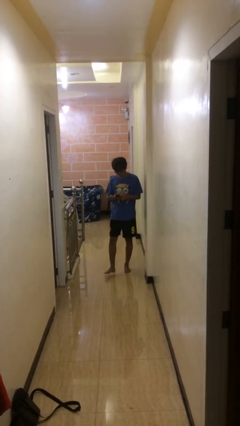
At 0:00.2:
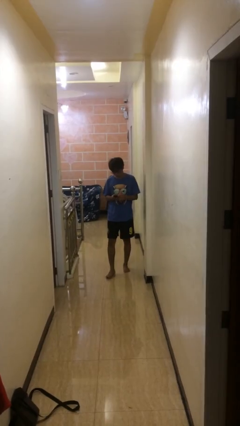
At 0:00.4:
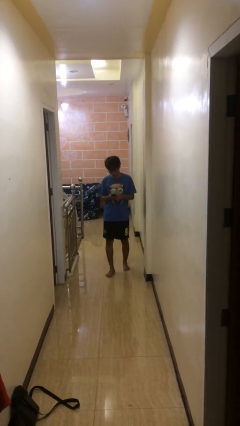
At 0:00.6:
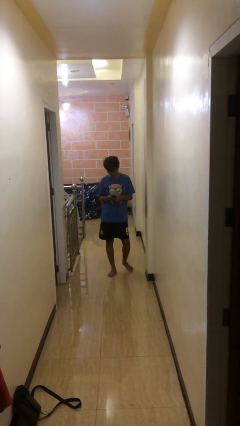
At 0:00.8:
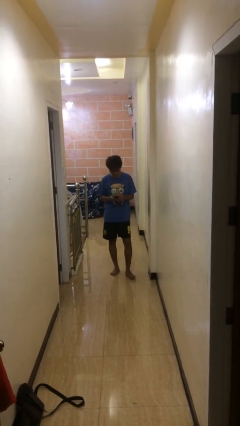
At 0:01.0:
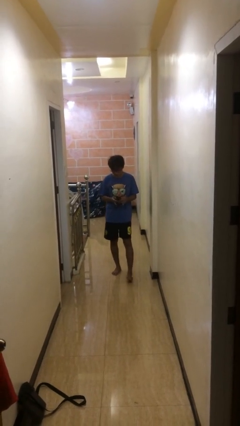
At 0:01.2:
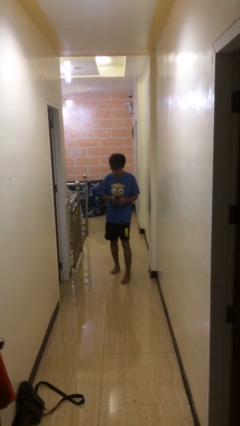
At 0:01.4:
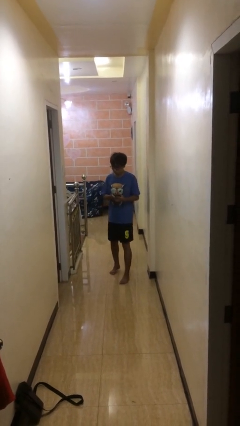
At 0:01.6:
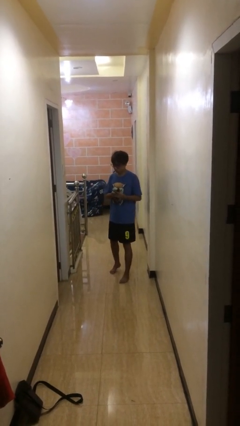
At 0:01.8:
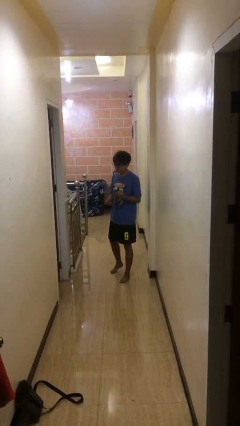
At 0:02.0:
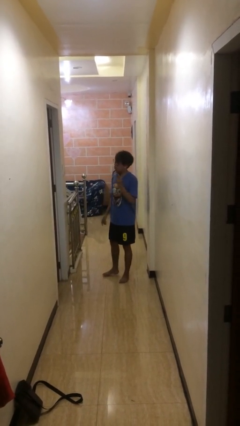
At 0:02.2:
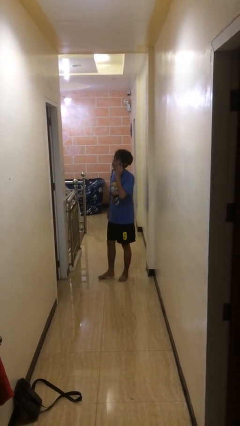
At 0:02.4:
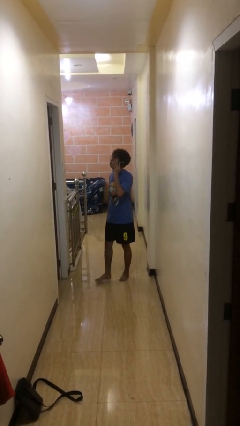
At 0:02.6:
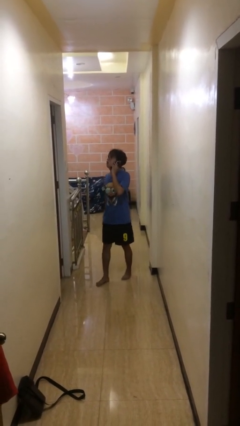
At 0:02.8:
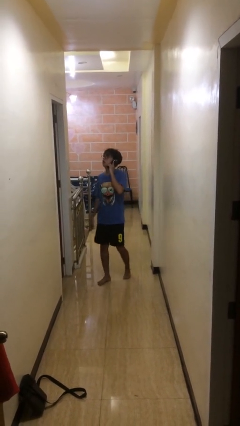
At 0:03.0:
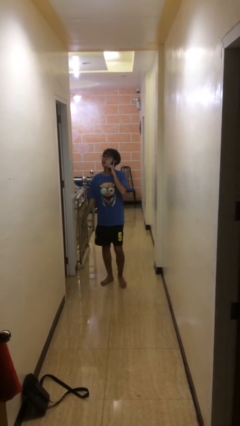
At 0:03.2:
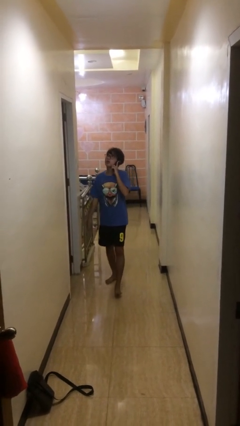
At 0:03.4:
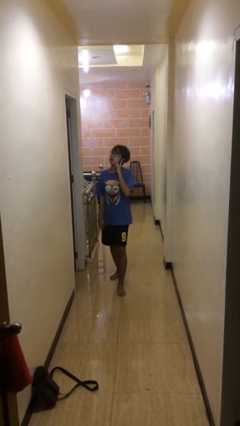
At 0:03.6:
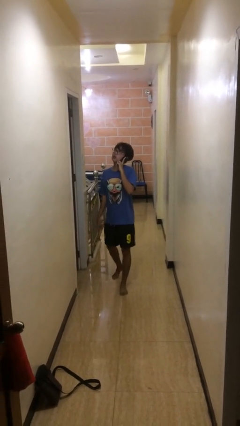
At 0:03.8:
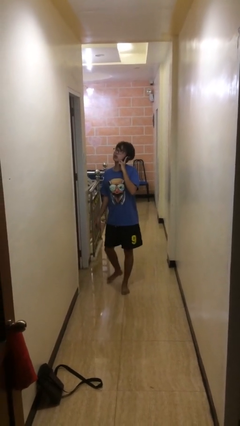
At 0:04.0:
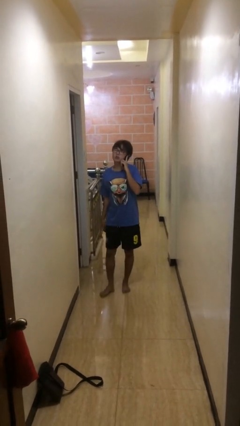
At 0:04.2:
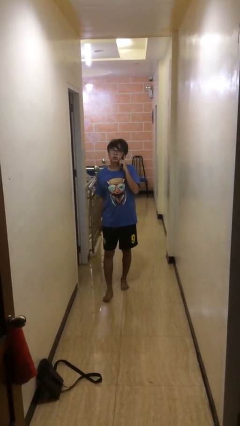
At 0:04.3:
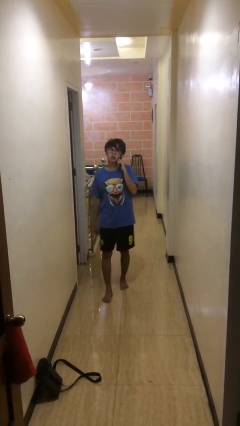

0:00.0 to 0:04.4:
person talks on phone

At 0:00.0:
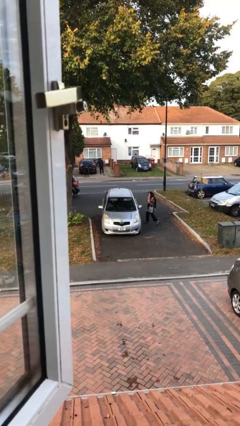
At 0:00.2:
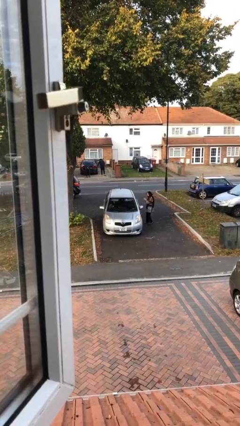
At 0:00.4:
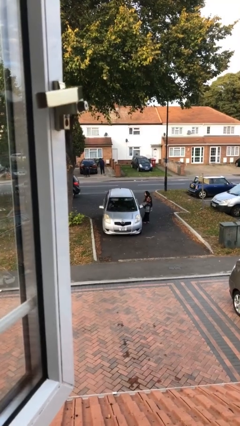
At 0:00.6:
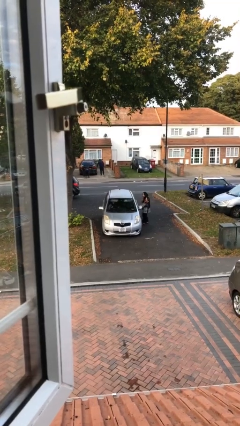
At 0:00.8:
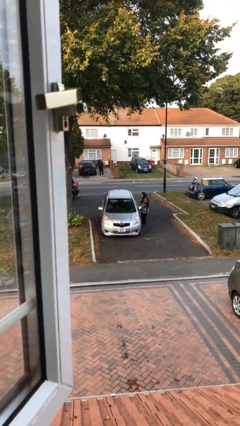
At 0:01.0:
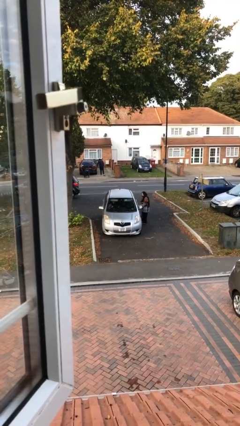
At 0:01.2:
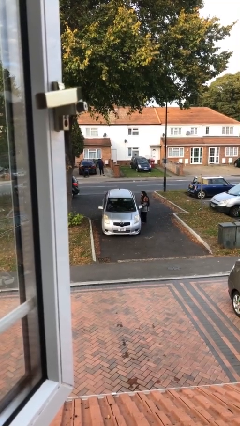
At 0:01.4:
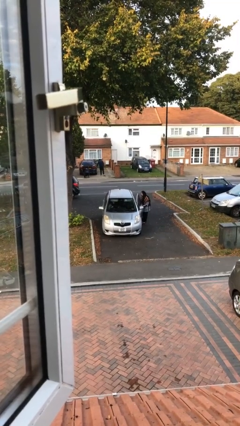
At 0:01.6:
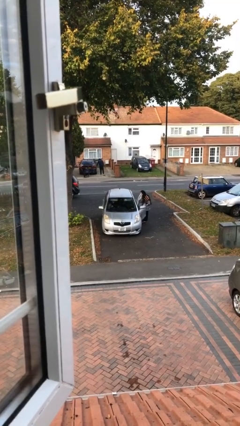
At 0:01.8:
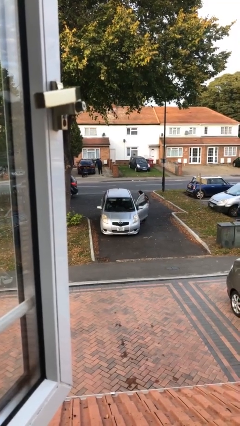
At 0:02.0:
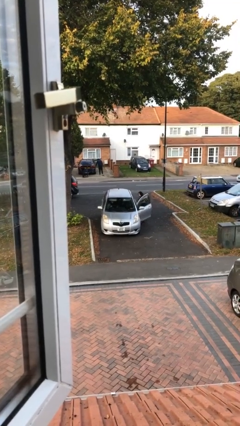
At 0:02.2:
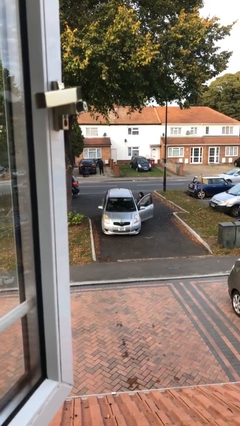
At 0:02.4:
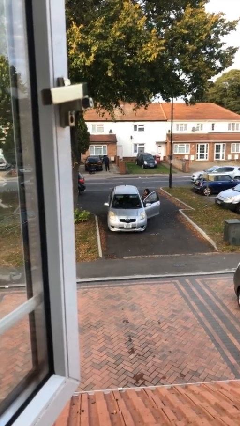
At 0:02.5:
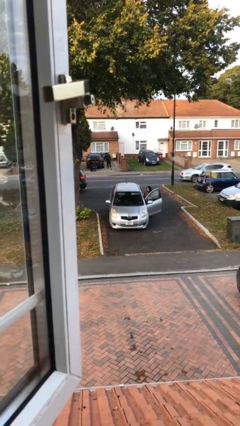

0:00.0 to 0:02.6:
car picks up person

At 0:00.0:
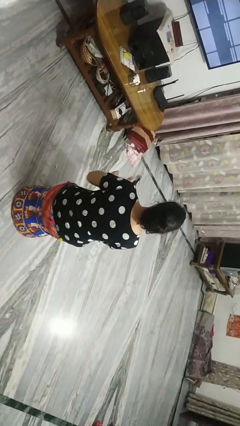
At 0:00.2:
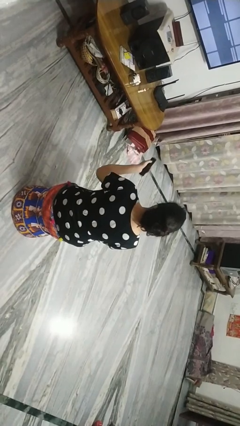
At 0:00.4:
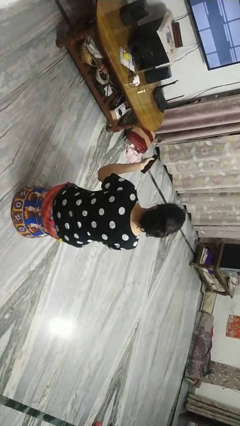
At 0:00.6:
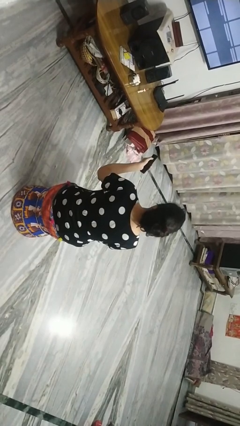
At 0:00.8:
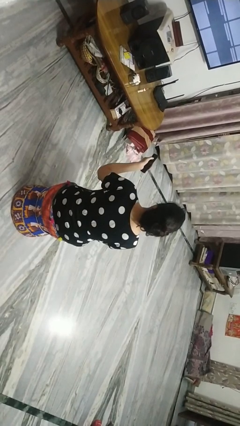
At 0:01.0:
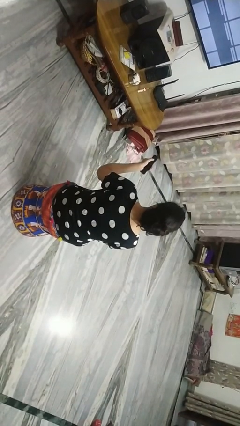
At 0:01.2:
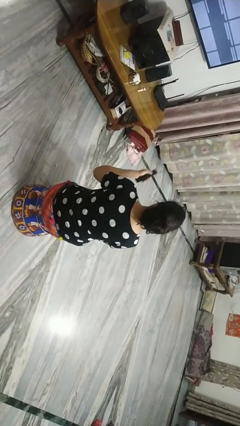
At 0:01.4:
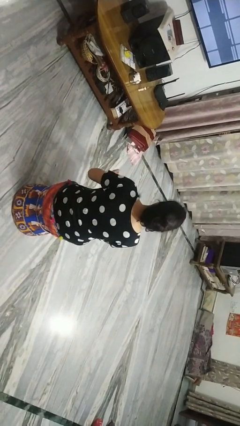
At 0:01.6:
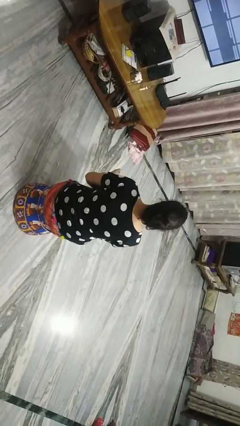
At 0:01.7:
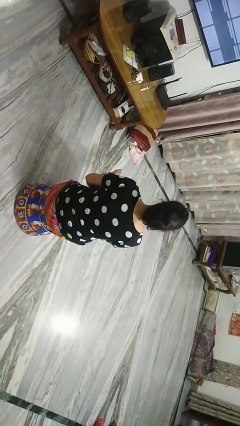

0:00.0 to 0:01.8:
person uses television remote

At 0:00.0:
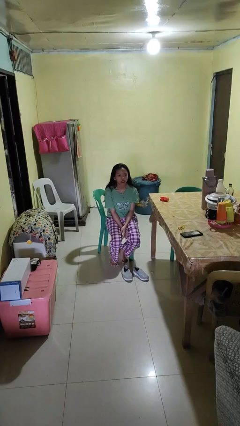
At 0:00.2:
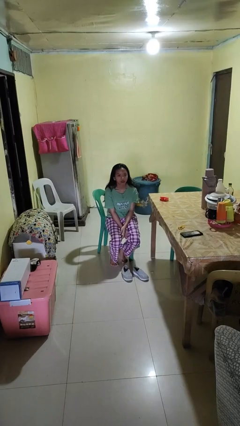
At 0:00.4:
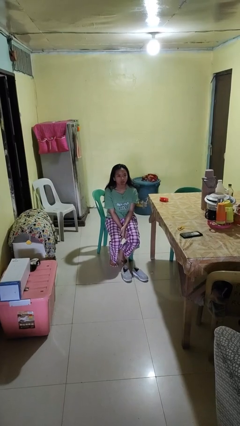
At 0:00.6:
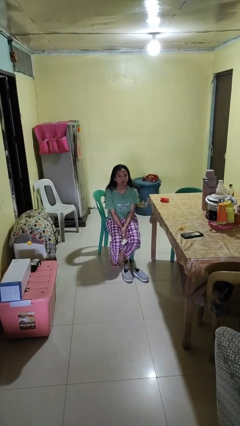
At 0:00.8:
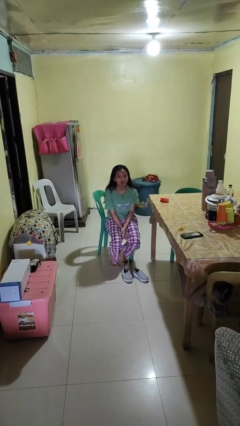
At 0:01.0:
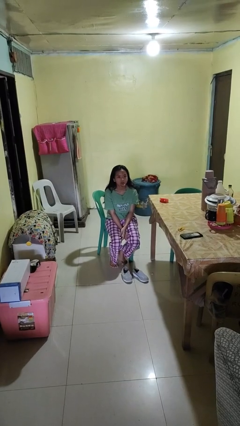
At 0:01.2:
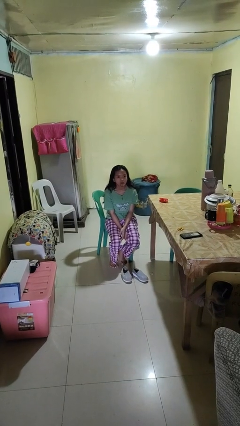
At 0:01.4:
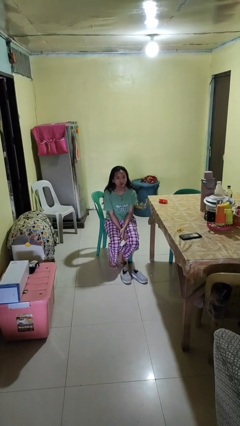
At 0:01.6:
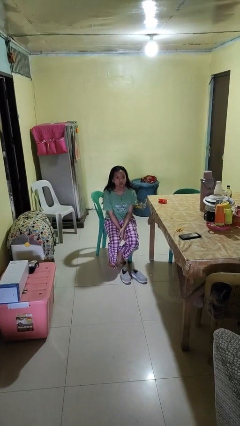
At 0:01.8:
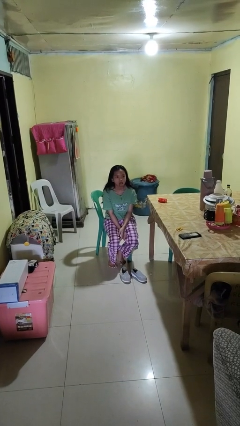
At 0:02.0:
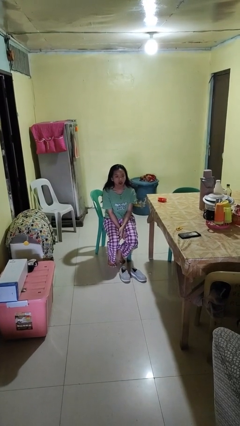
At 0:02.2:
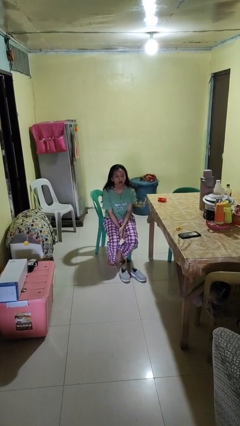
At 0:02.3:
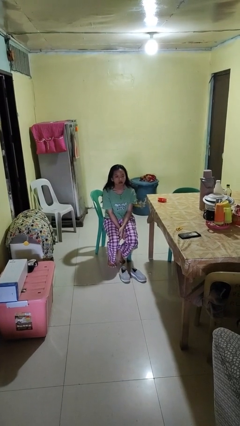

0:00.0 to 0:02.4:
person sticks out tongue

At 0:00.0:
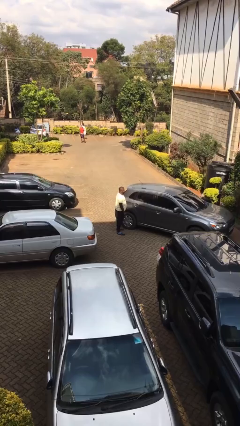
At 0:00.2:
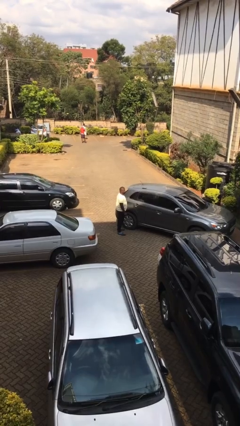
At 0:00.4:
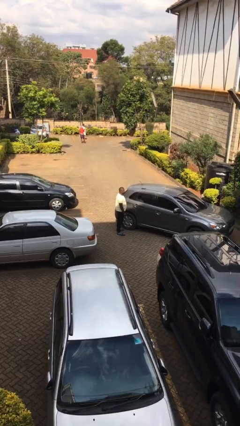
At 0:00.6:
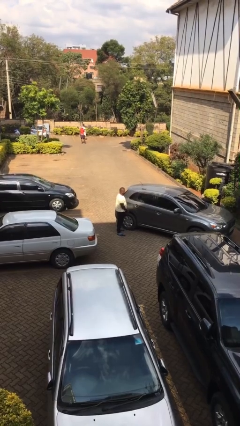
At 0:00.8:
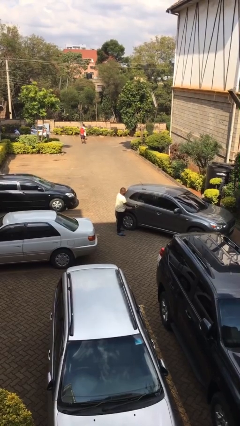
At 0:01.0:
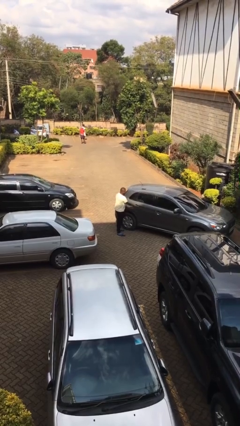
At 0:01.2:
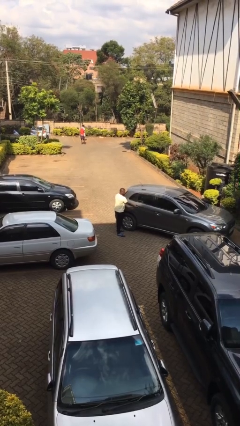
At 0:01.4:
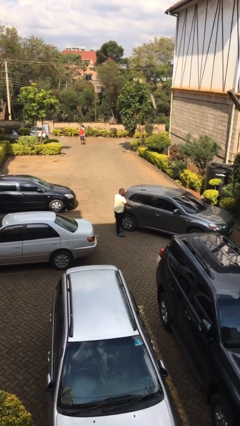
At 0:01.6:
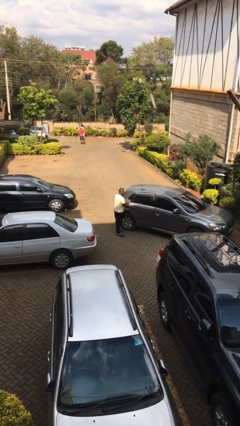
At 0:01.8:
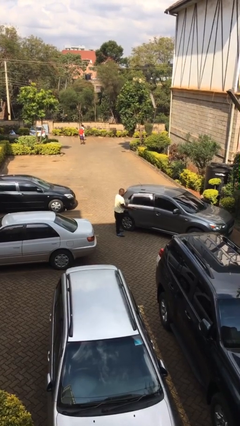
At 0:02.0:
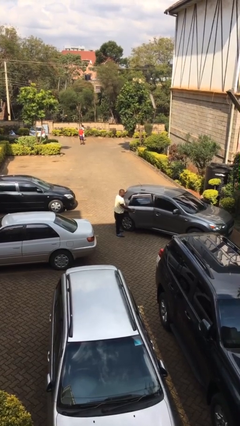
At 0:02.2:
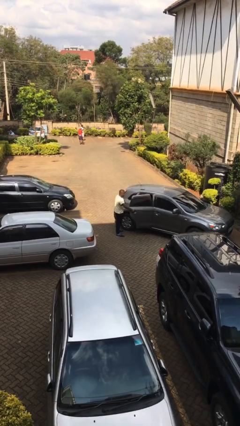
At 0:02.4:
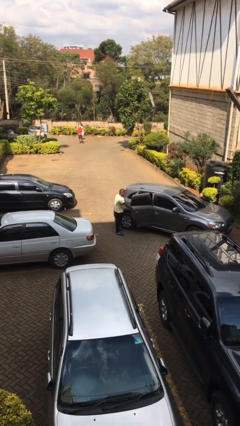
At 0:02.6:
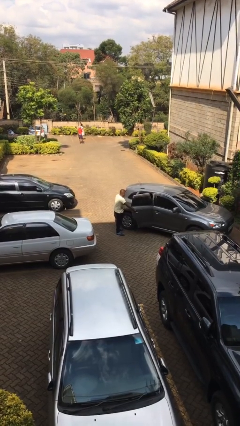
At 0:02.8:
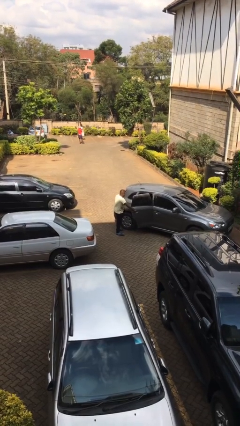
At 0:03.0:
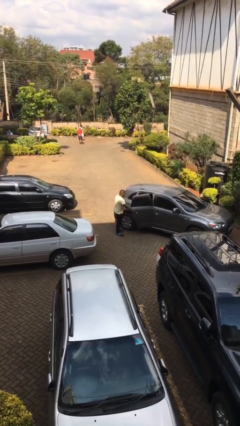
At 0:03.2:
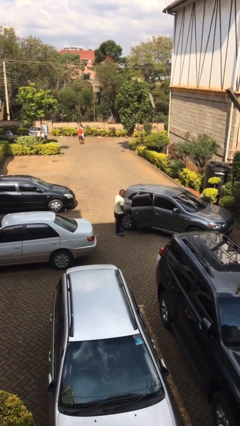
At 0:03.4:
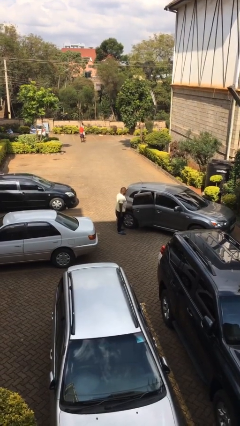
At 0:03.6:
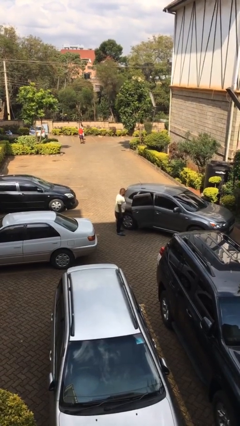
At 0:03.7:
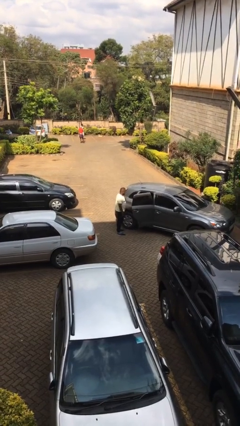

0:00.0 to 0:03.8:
person opens car door

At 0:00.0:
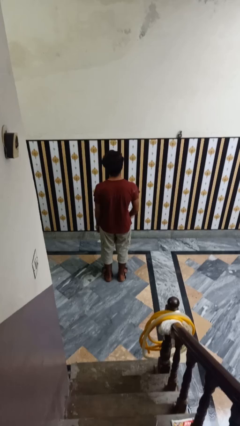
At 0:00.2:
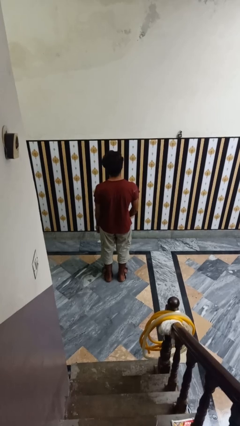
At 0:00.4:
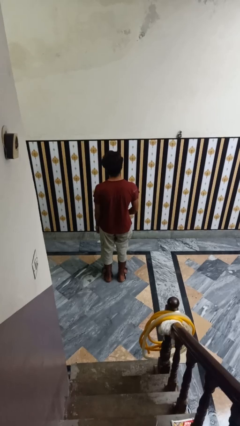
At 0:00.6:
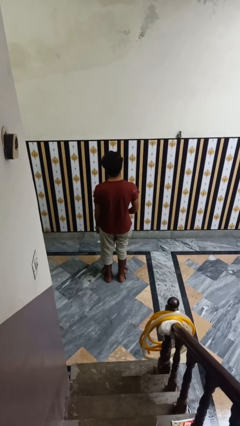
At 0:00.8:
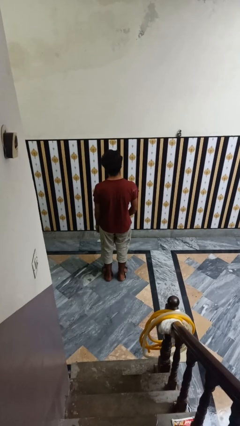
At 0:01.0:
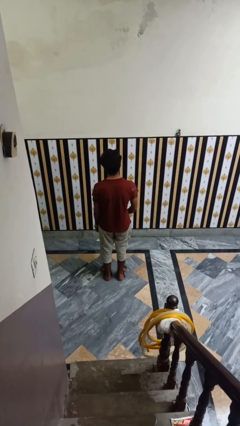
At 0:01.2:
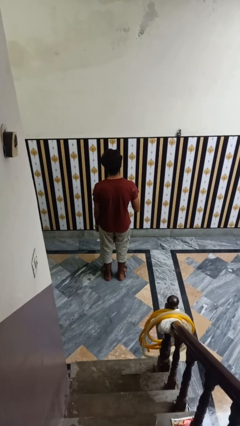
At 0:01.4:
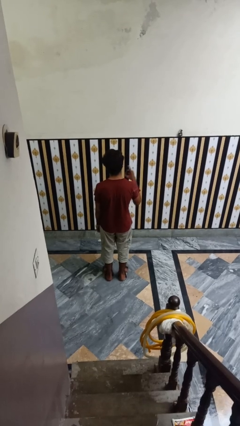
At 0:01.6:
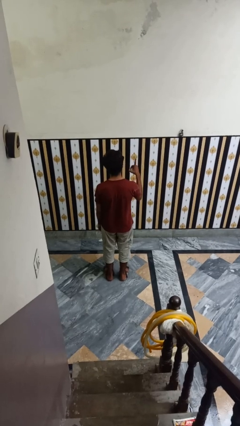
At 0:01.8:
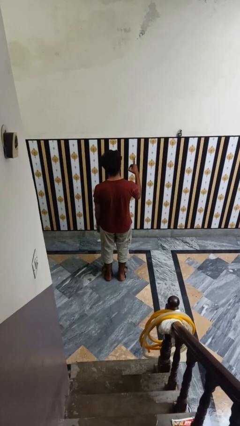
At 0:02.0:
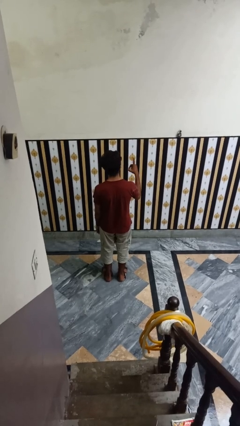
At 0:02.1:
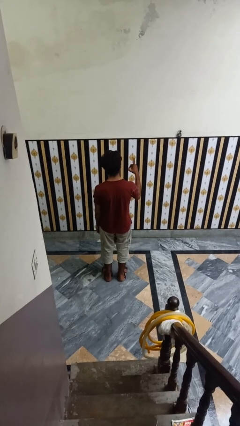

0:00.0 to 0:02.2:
person gestures number one
